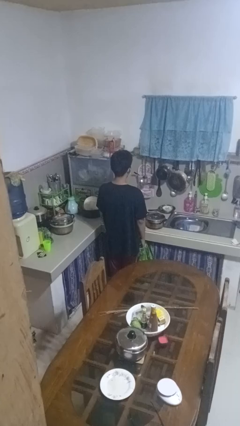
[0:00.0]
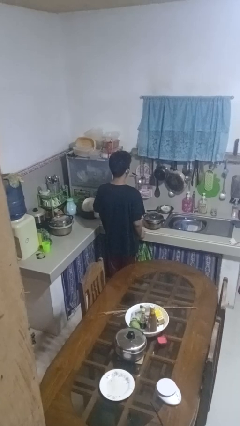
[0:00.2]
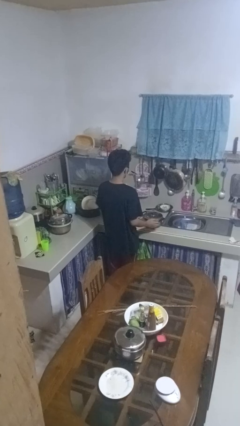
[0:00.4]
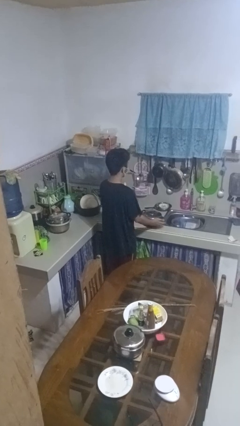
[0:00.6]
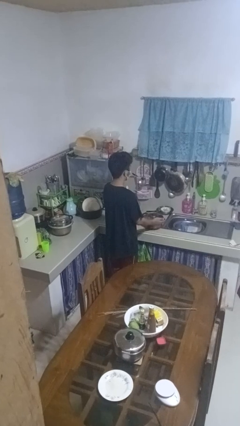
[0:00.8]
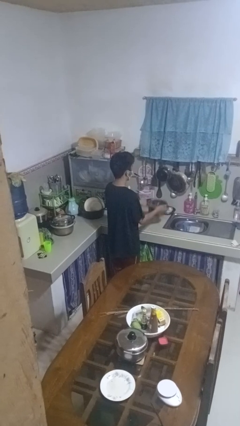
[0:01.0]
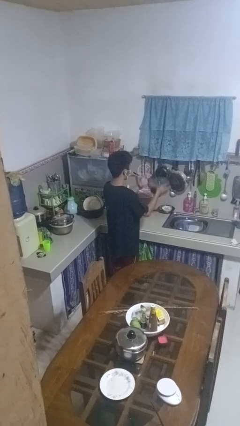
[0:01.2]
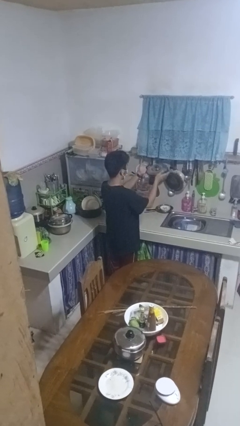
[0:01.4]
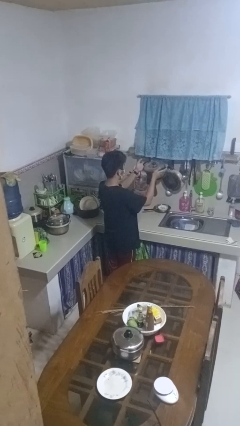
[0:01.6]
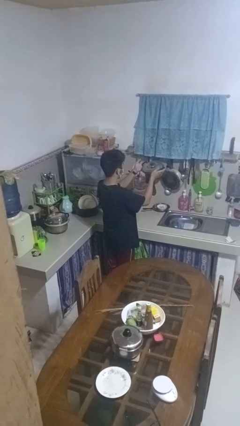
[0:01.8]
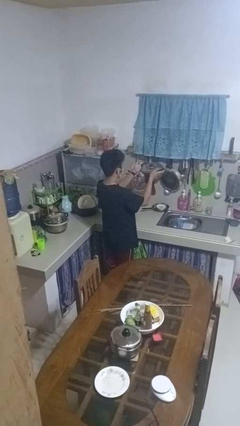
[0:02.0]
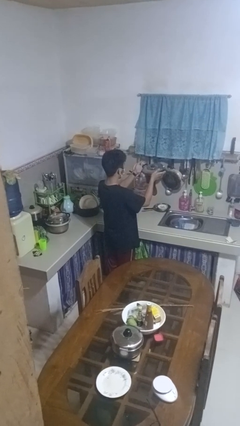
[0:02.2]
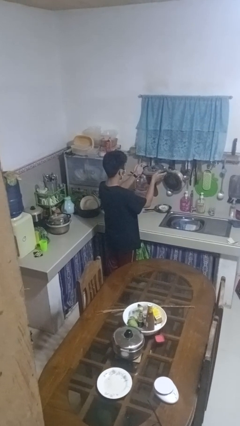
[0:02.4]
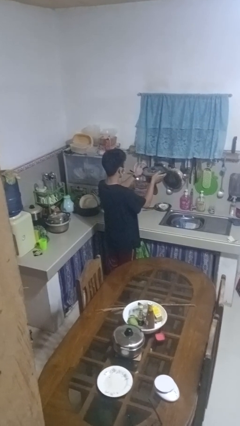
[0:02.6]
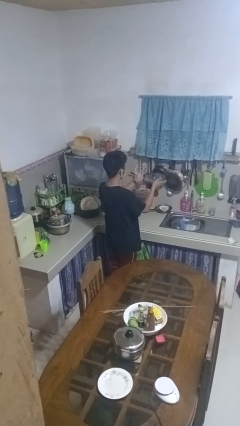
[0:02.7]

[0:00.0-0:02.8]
person picks up object from countertop

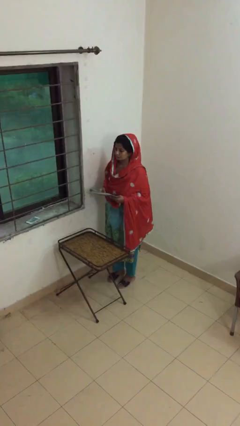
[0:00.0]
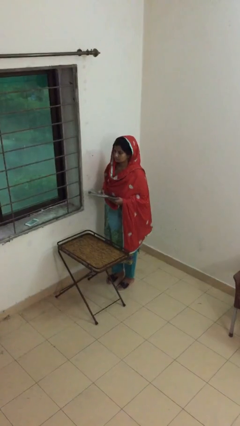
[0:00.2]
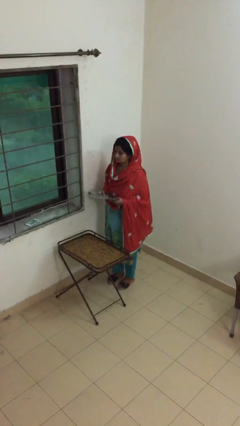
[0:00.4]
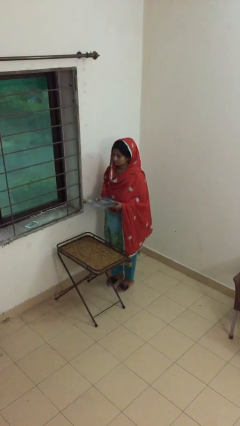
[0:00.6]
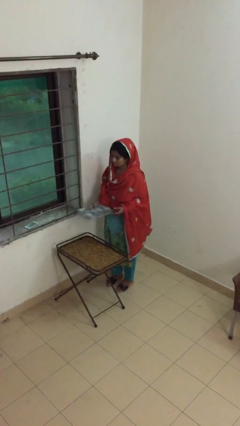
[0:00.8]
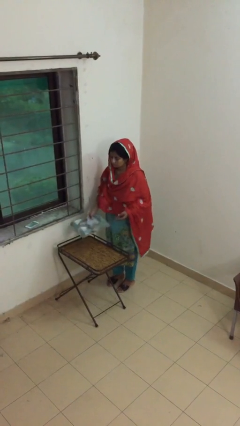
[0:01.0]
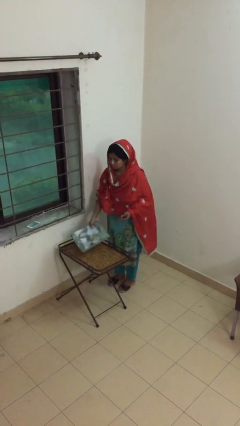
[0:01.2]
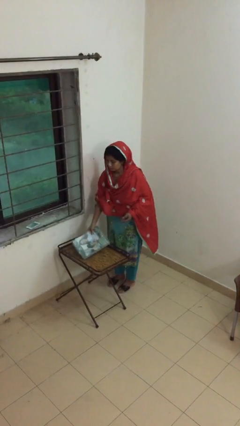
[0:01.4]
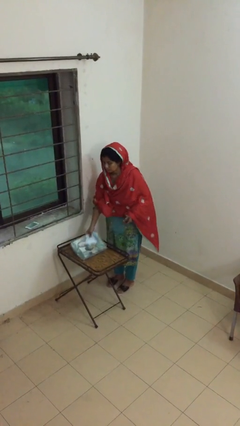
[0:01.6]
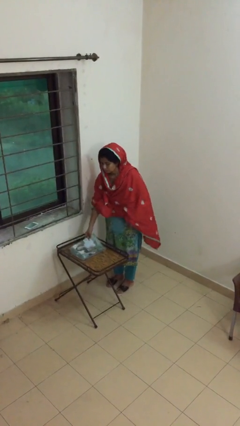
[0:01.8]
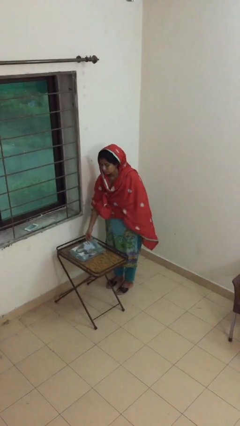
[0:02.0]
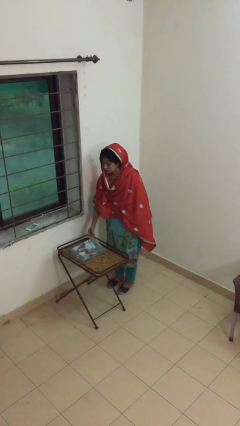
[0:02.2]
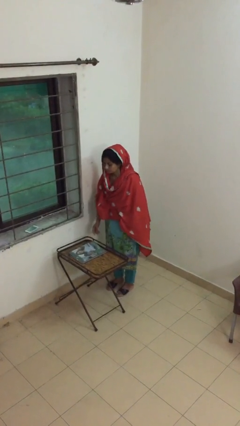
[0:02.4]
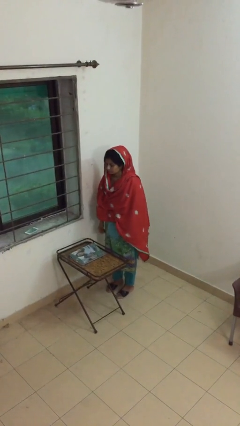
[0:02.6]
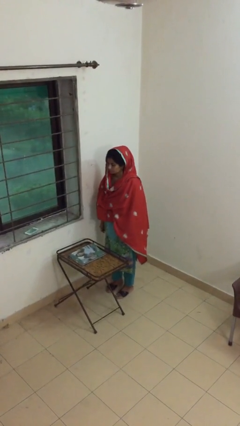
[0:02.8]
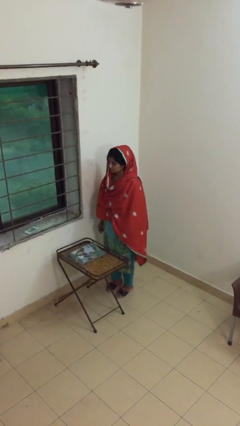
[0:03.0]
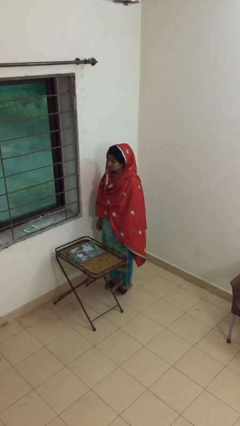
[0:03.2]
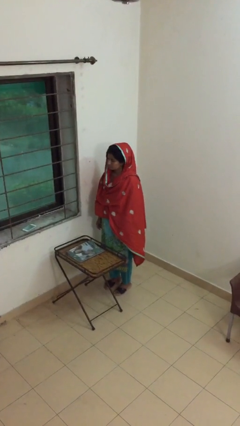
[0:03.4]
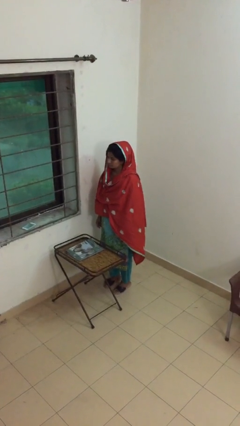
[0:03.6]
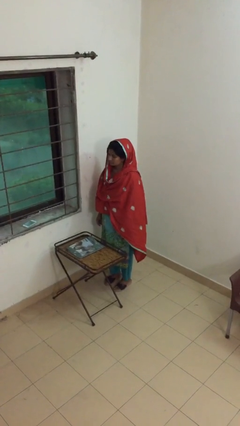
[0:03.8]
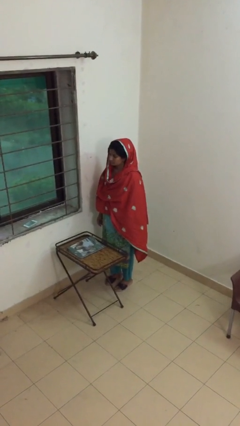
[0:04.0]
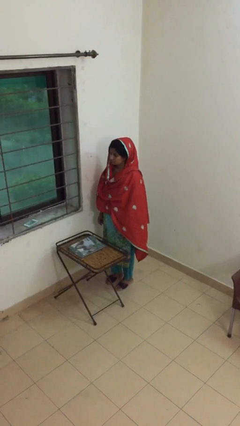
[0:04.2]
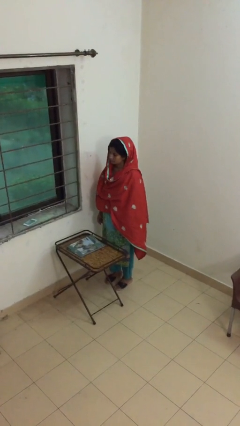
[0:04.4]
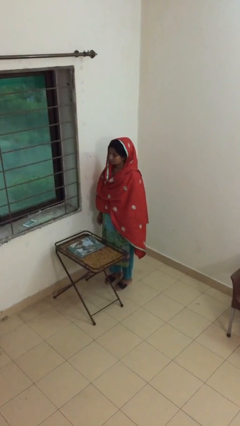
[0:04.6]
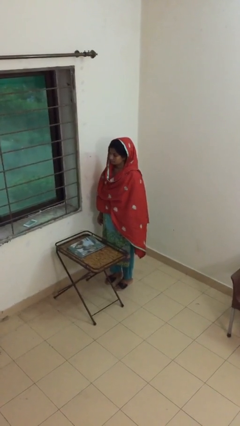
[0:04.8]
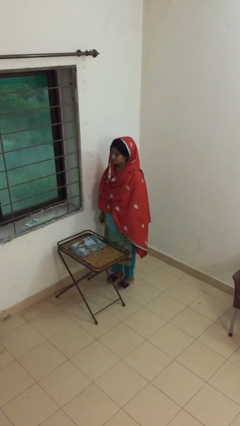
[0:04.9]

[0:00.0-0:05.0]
person puts down object on table

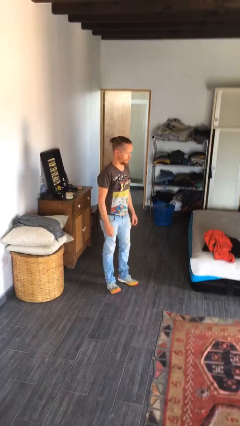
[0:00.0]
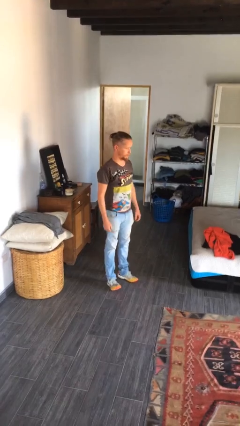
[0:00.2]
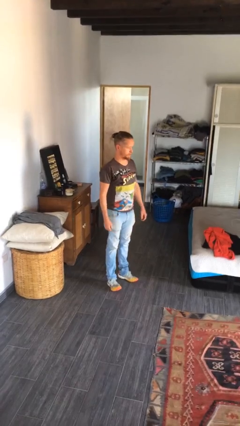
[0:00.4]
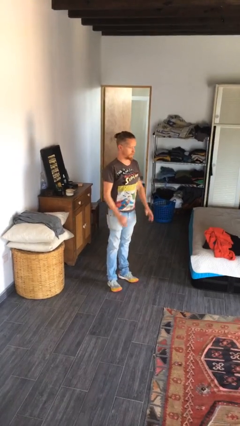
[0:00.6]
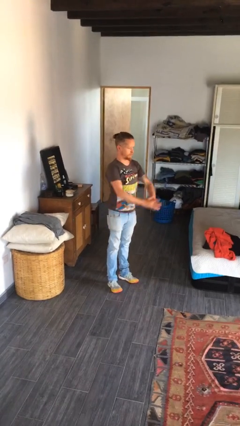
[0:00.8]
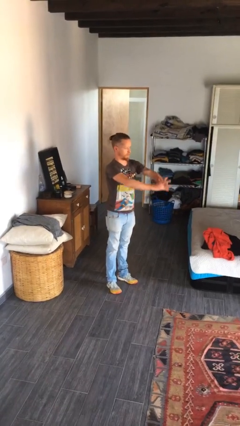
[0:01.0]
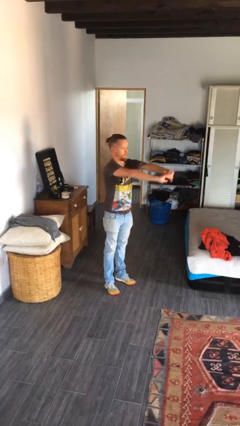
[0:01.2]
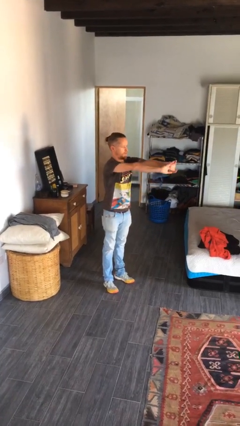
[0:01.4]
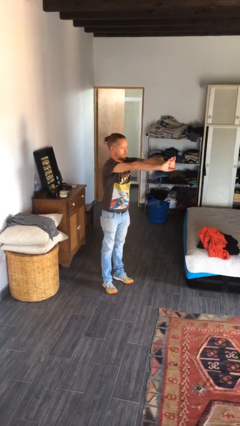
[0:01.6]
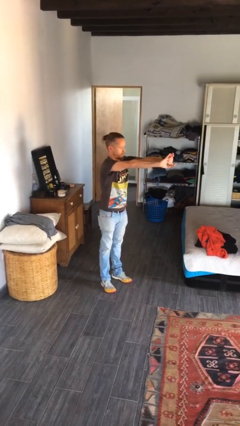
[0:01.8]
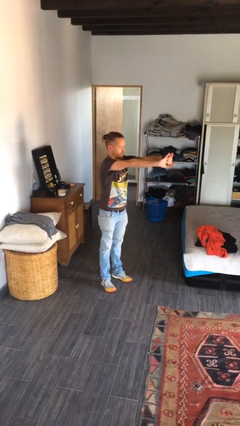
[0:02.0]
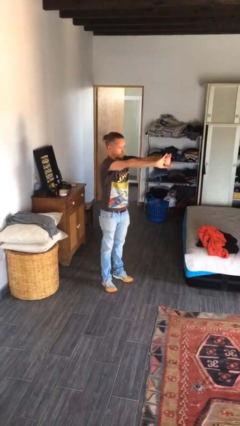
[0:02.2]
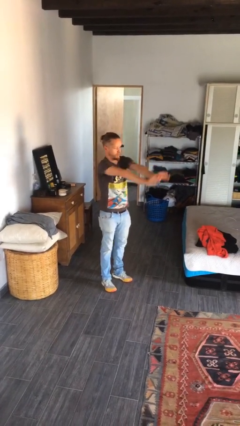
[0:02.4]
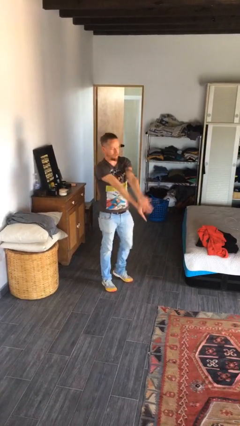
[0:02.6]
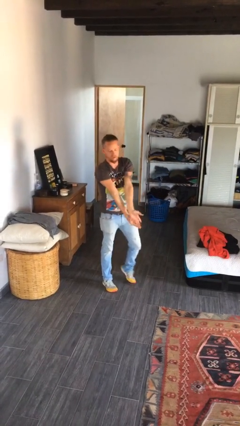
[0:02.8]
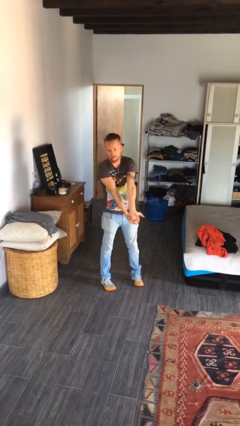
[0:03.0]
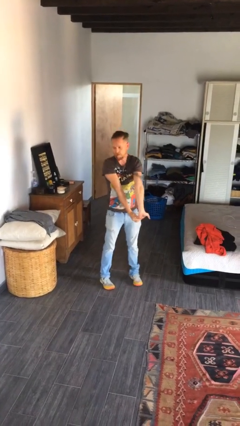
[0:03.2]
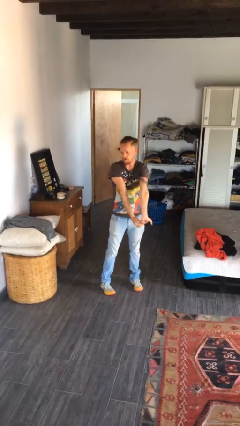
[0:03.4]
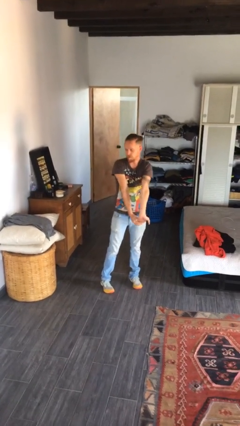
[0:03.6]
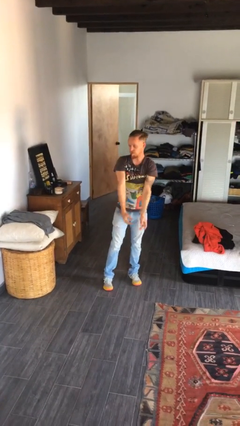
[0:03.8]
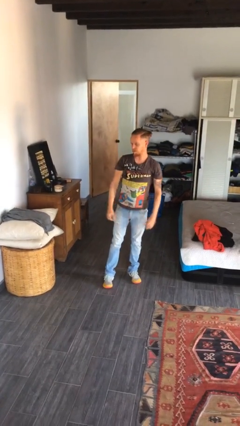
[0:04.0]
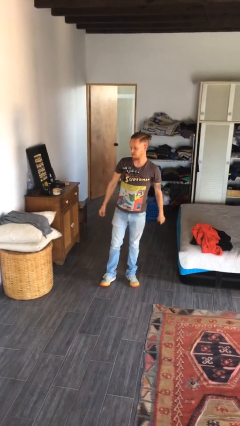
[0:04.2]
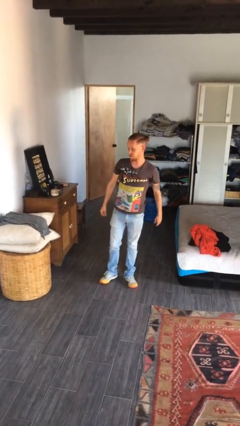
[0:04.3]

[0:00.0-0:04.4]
person stretches arms to side

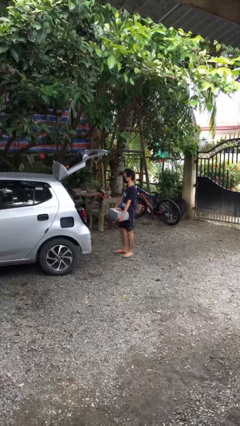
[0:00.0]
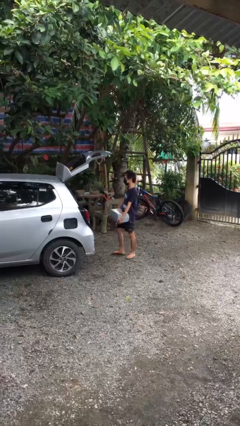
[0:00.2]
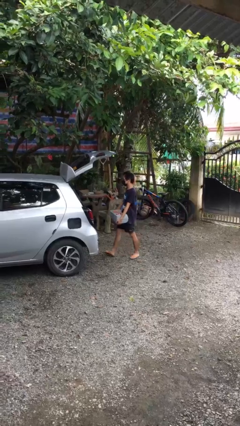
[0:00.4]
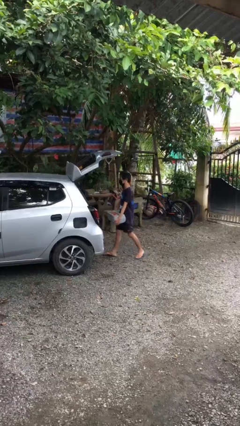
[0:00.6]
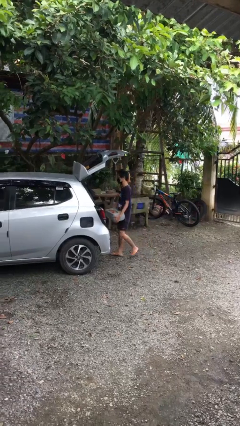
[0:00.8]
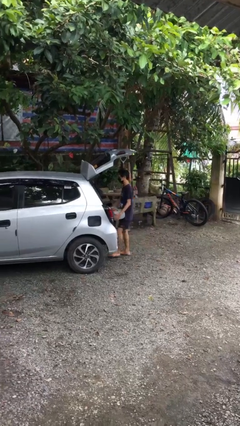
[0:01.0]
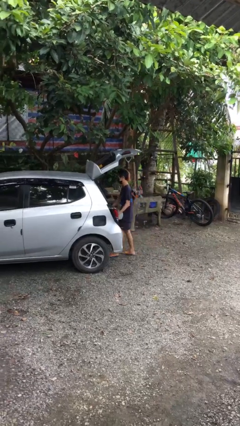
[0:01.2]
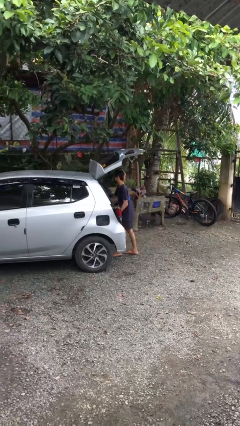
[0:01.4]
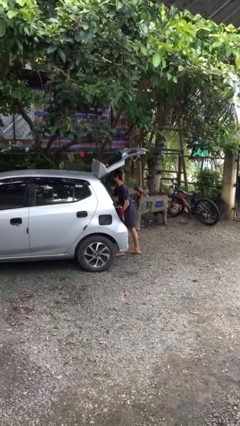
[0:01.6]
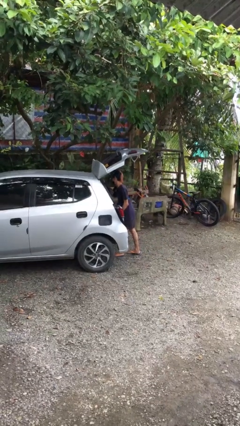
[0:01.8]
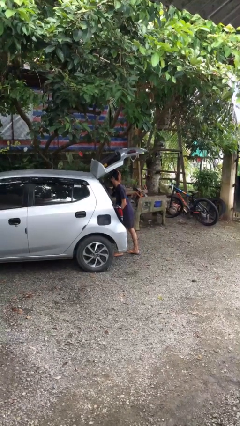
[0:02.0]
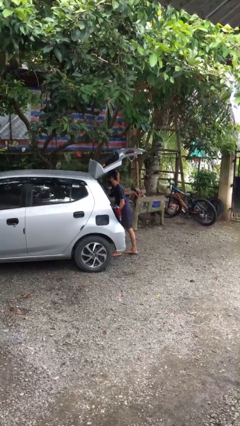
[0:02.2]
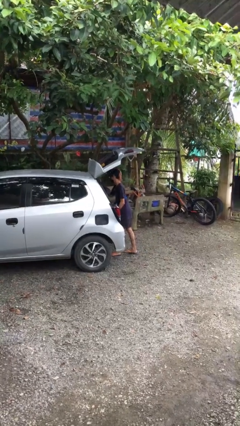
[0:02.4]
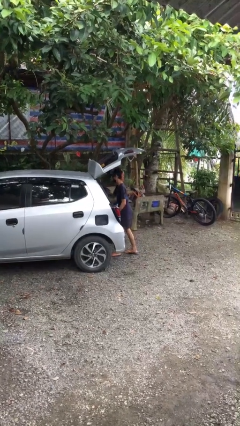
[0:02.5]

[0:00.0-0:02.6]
person loads car

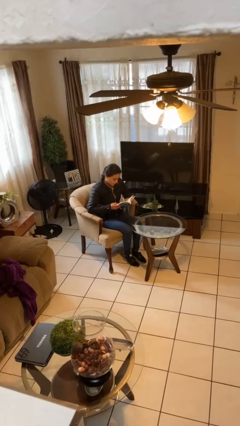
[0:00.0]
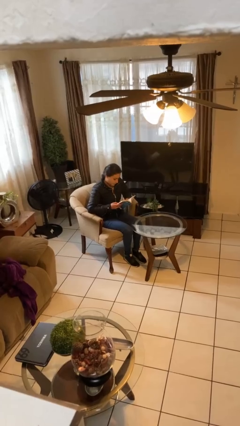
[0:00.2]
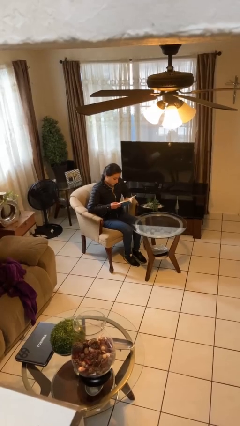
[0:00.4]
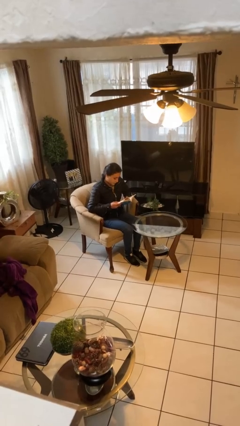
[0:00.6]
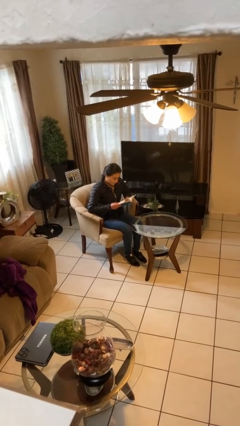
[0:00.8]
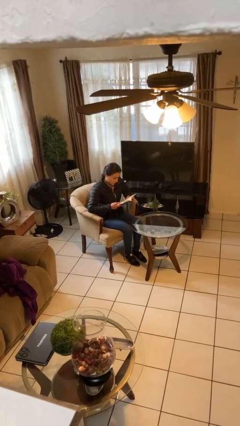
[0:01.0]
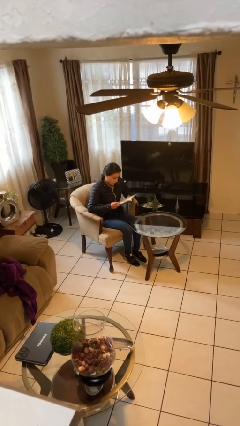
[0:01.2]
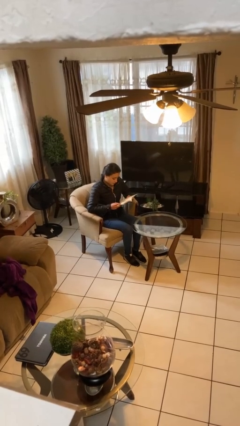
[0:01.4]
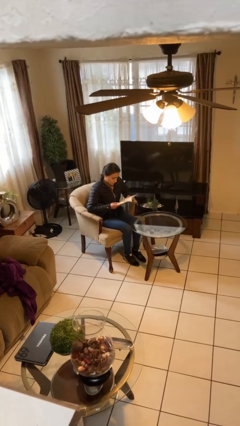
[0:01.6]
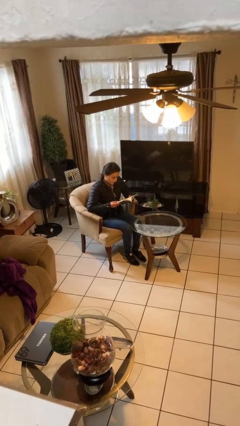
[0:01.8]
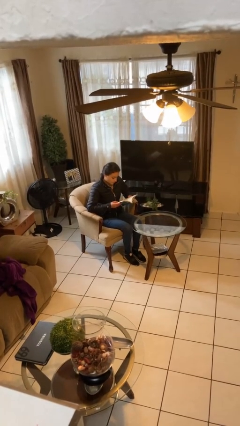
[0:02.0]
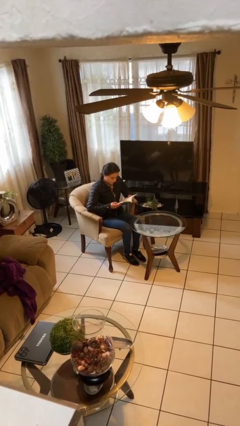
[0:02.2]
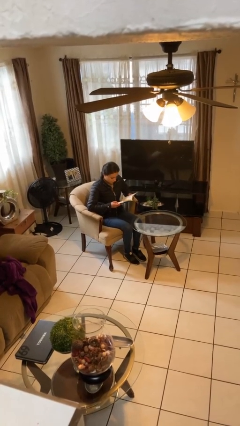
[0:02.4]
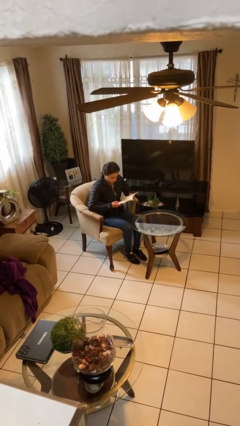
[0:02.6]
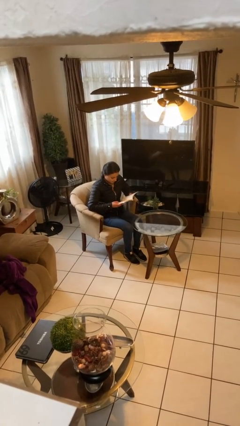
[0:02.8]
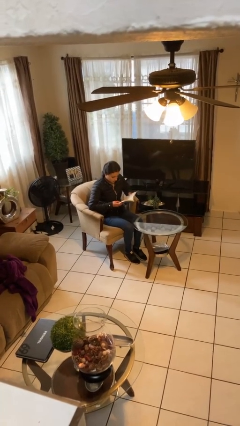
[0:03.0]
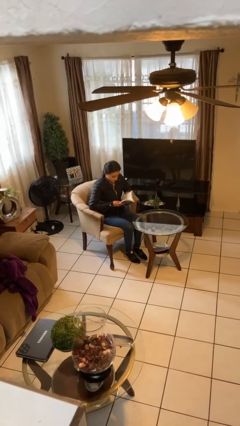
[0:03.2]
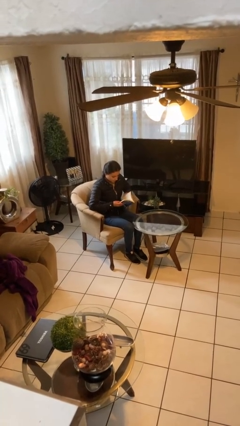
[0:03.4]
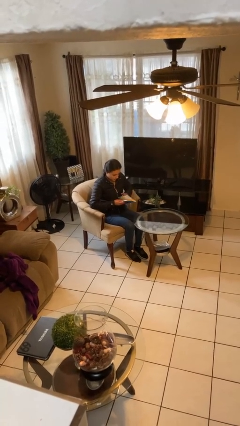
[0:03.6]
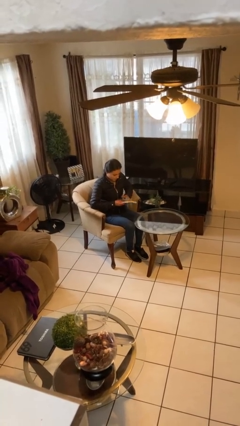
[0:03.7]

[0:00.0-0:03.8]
person reads document
